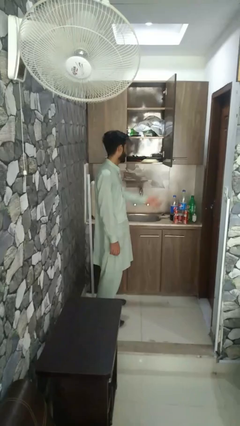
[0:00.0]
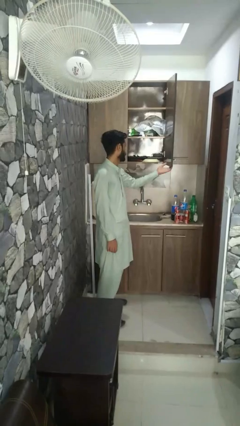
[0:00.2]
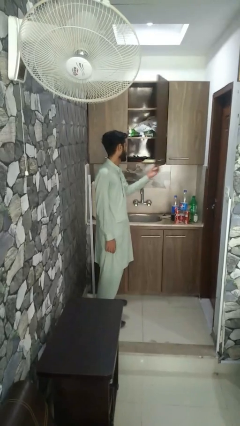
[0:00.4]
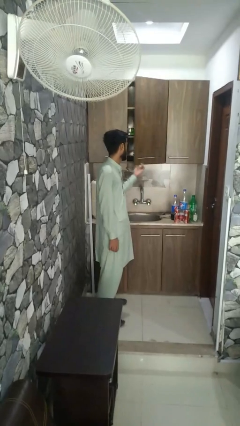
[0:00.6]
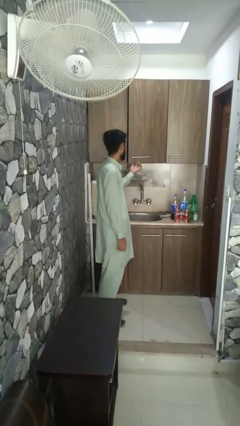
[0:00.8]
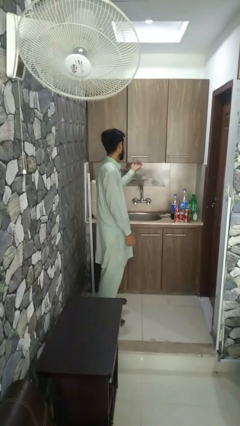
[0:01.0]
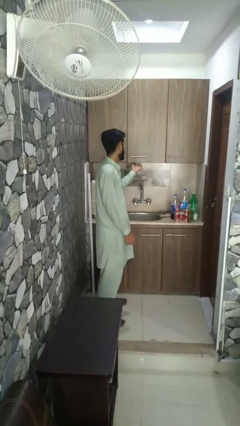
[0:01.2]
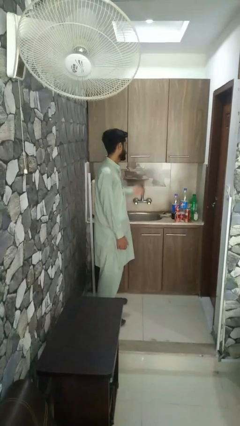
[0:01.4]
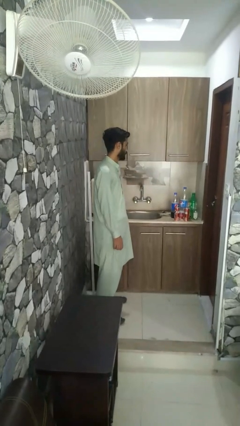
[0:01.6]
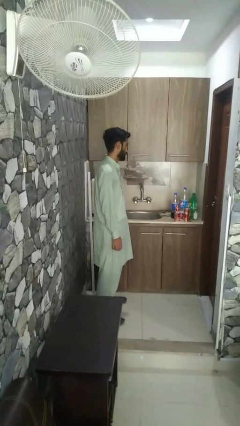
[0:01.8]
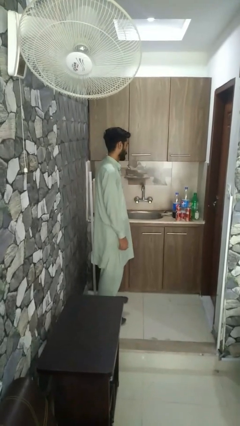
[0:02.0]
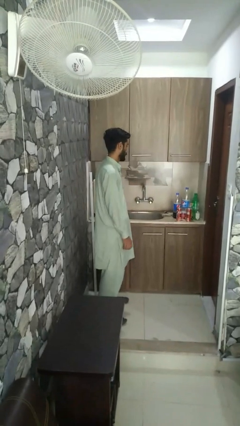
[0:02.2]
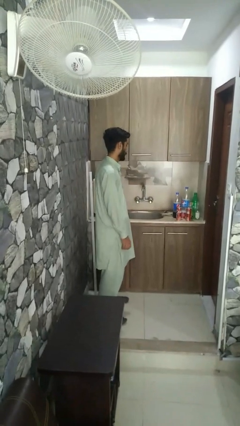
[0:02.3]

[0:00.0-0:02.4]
person closes closet door

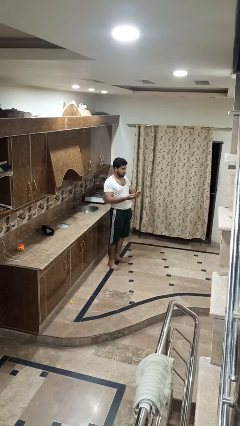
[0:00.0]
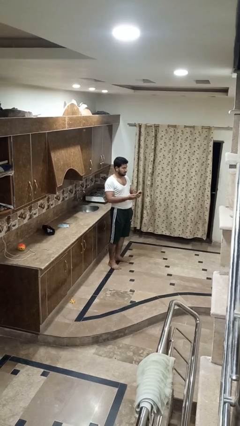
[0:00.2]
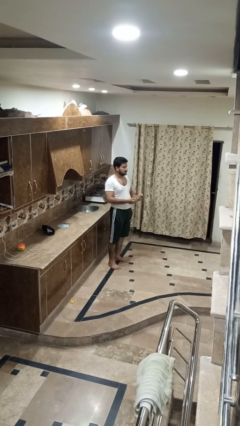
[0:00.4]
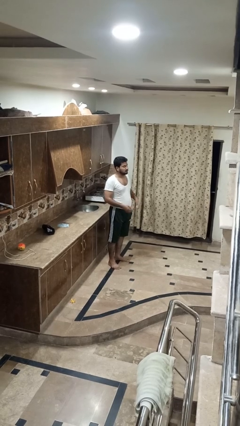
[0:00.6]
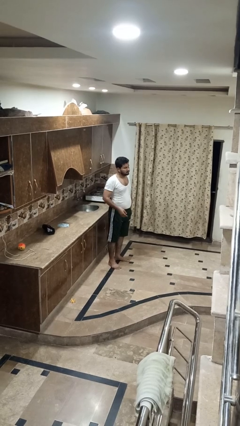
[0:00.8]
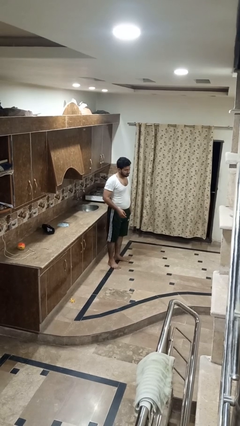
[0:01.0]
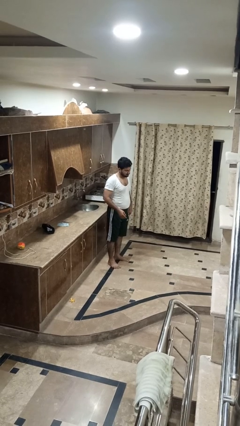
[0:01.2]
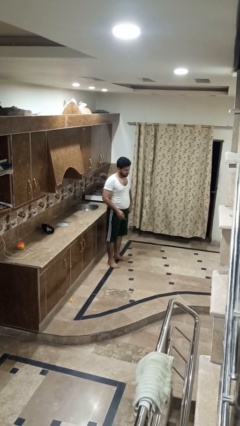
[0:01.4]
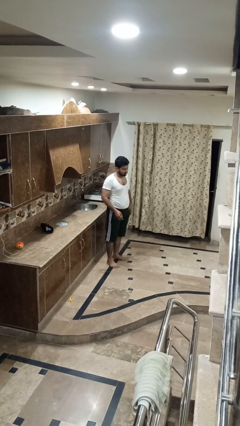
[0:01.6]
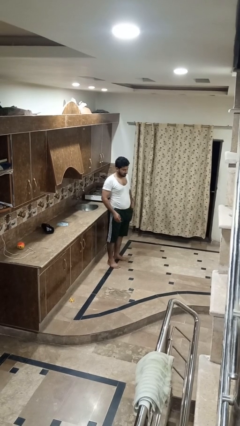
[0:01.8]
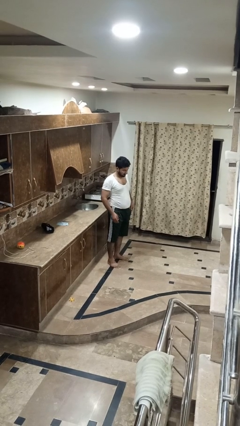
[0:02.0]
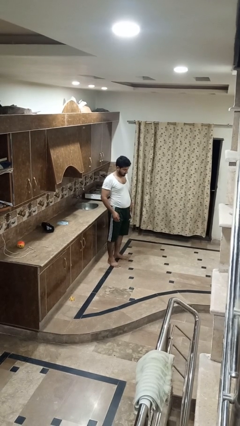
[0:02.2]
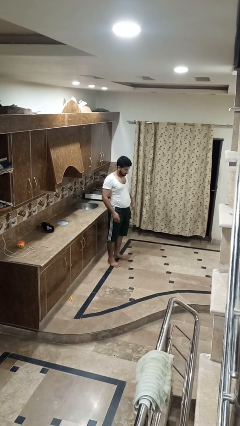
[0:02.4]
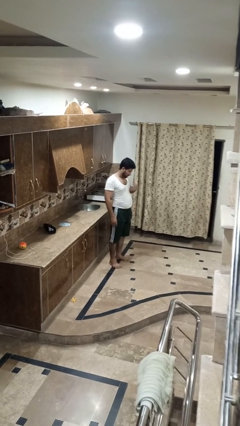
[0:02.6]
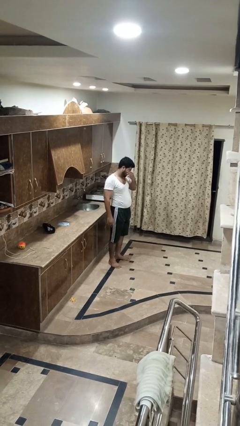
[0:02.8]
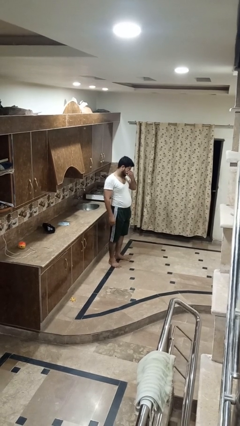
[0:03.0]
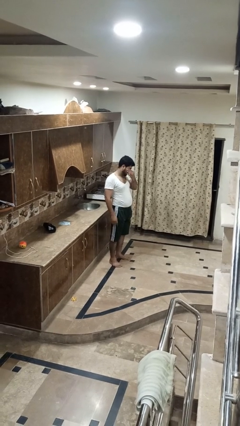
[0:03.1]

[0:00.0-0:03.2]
person puts phone into pocket

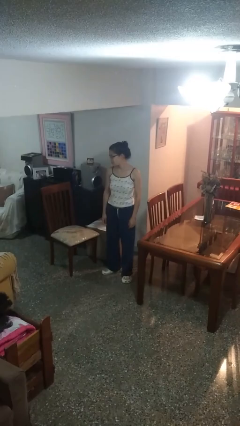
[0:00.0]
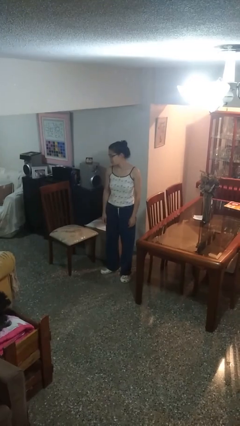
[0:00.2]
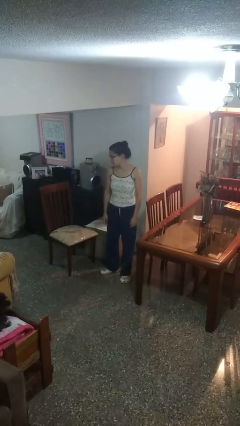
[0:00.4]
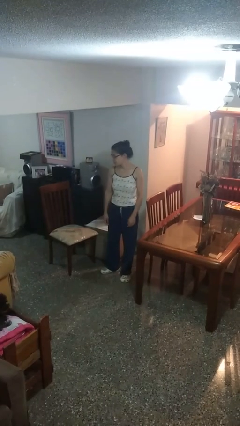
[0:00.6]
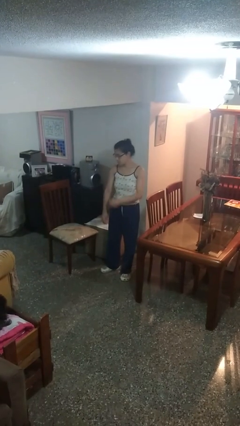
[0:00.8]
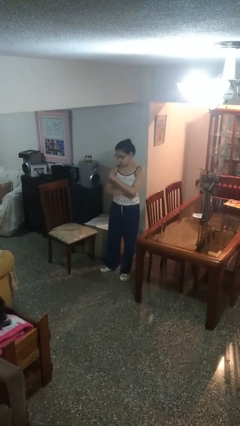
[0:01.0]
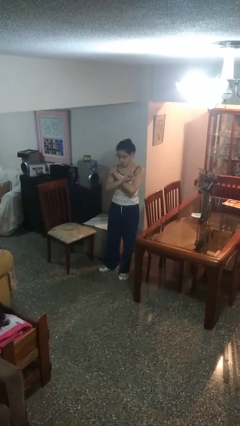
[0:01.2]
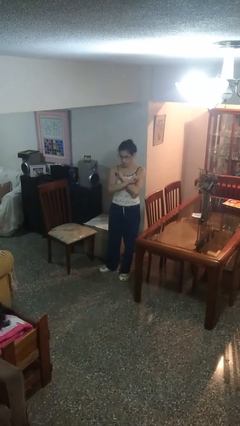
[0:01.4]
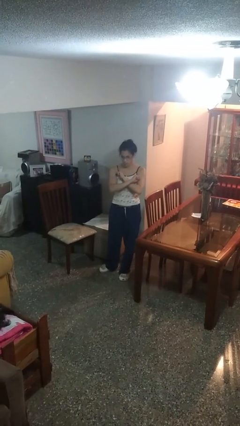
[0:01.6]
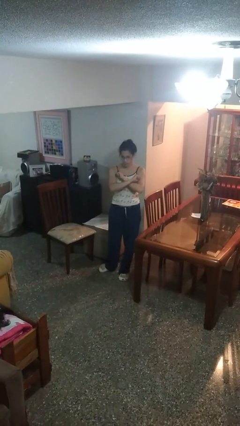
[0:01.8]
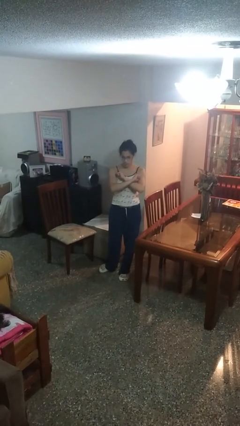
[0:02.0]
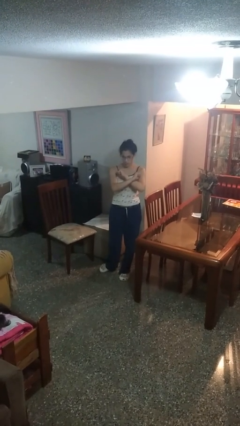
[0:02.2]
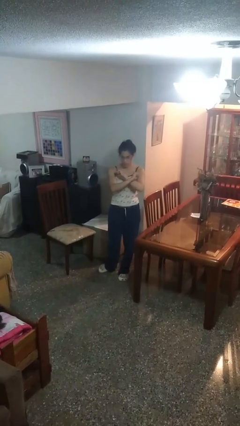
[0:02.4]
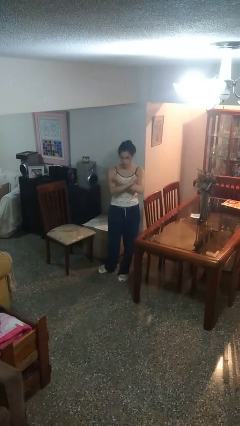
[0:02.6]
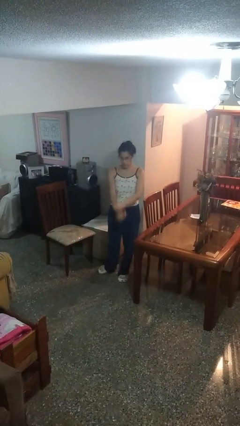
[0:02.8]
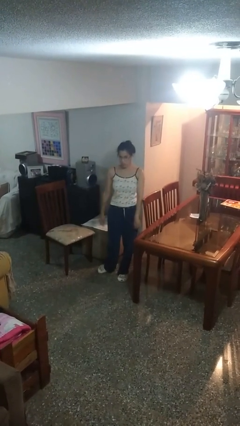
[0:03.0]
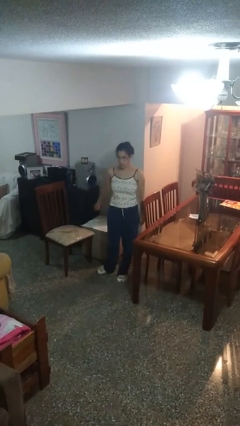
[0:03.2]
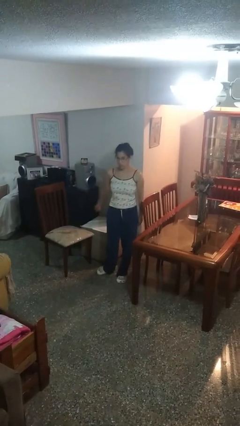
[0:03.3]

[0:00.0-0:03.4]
person gestures arms x

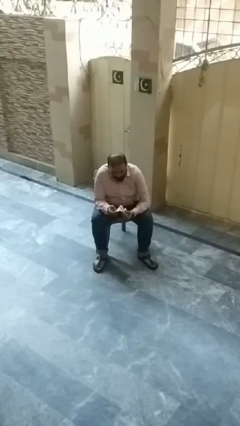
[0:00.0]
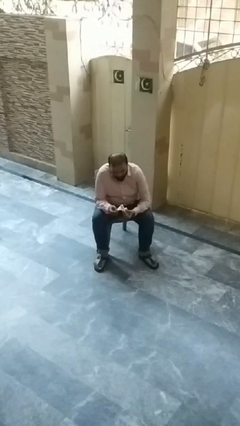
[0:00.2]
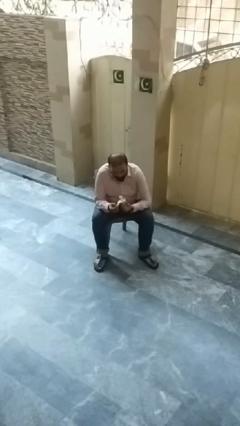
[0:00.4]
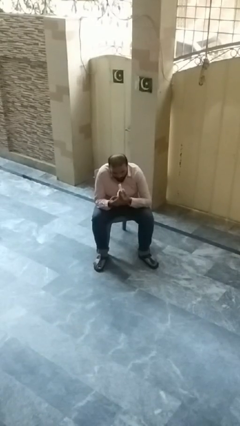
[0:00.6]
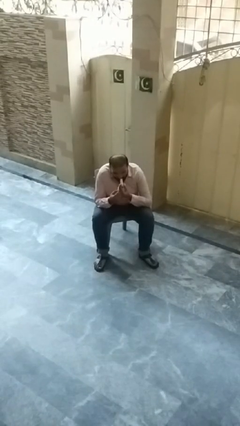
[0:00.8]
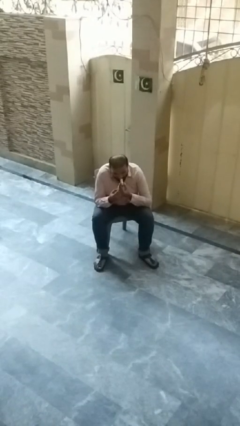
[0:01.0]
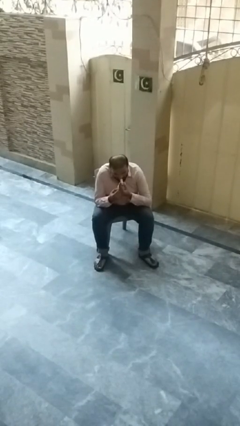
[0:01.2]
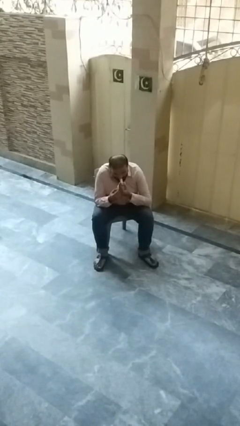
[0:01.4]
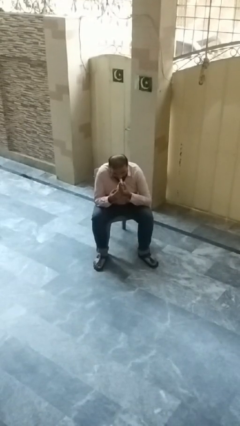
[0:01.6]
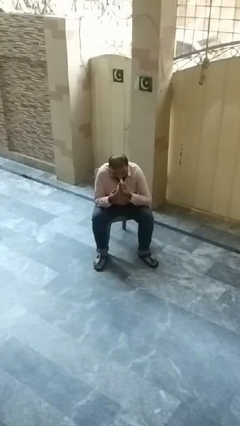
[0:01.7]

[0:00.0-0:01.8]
person eats banana

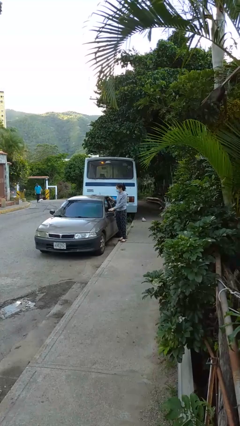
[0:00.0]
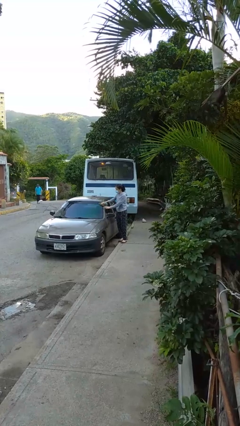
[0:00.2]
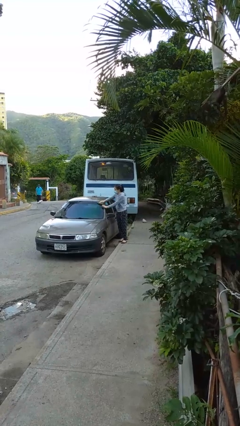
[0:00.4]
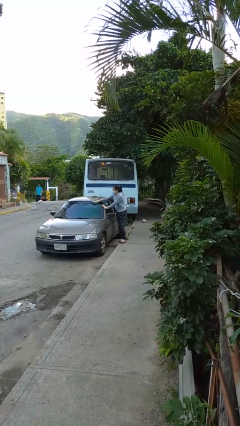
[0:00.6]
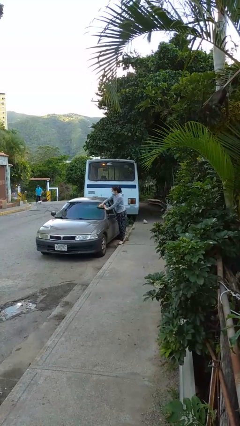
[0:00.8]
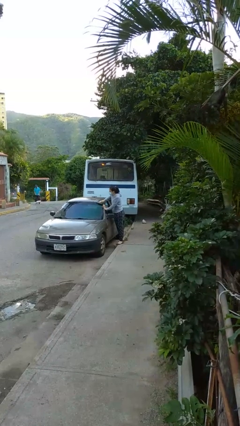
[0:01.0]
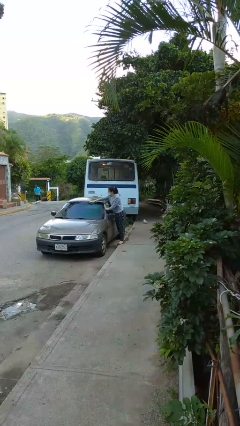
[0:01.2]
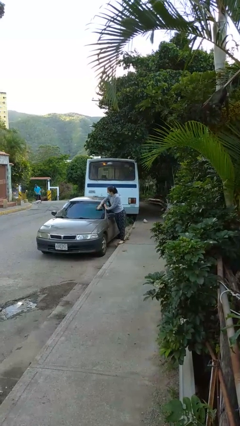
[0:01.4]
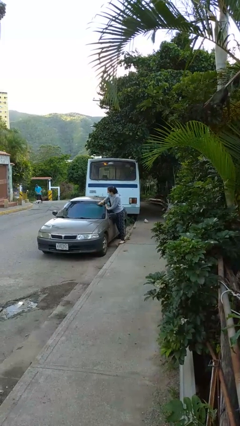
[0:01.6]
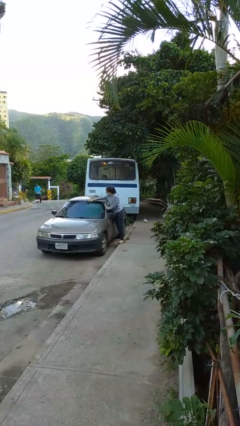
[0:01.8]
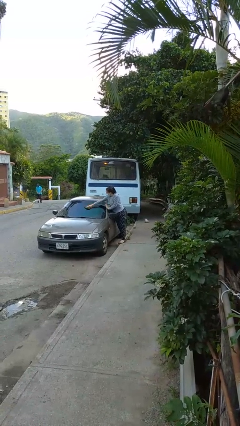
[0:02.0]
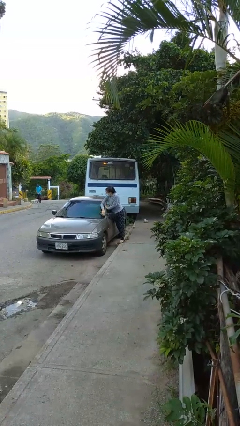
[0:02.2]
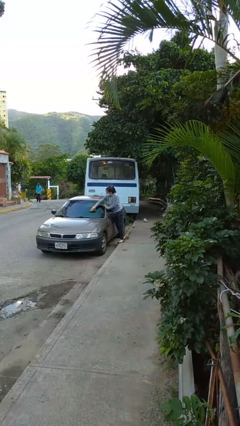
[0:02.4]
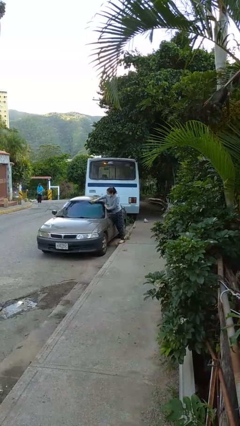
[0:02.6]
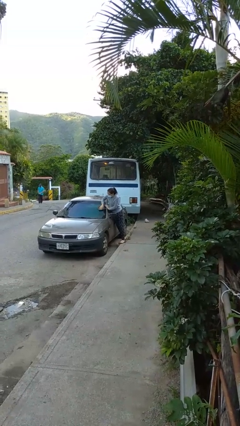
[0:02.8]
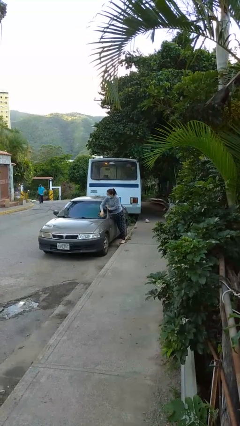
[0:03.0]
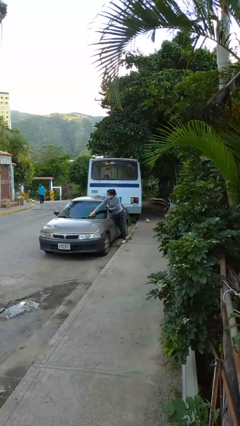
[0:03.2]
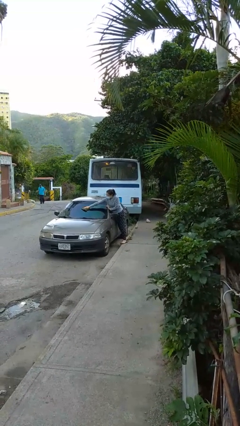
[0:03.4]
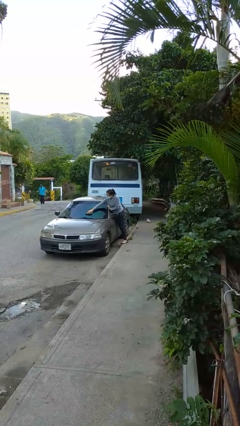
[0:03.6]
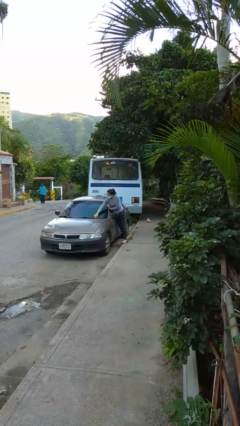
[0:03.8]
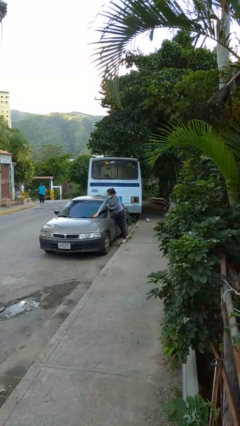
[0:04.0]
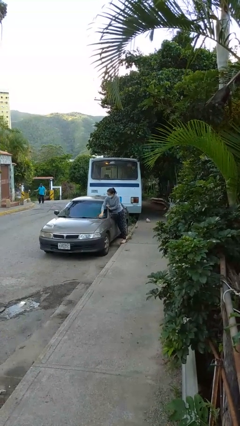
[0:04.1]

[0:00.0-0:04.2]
person polishes car with rag

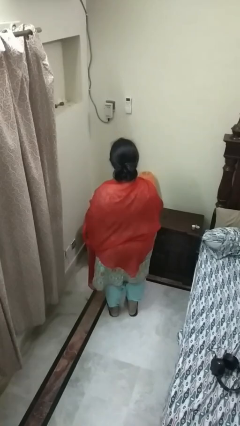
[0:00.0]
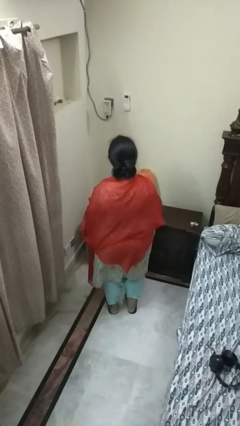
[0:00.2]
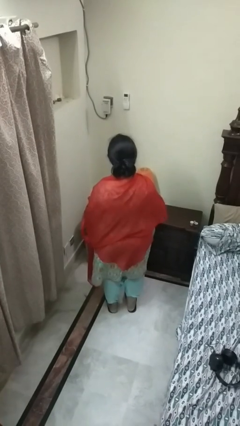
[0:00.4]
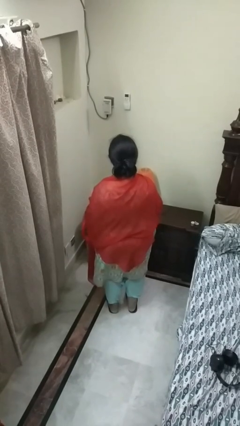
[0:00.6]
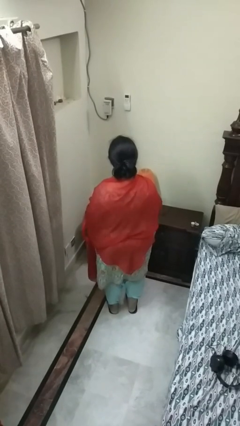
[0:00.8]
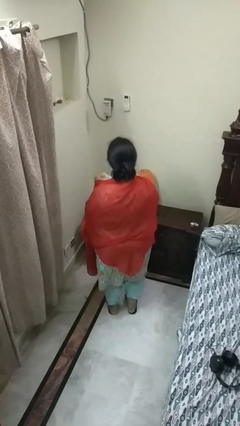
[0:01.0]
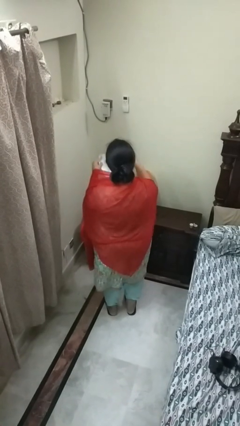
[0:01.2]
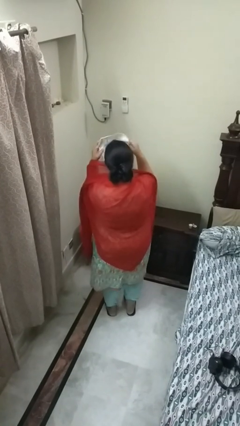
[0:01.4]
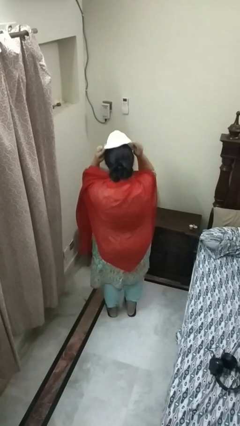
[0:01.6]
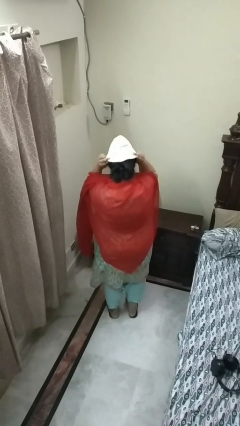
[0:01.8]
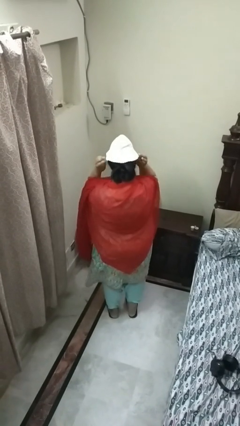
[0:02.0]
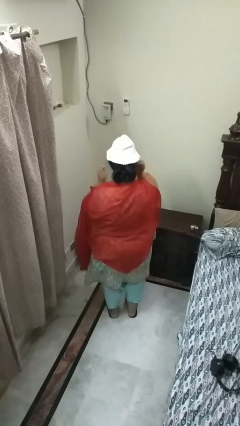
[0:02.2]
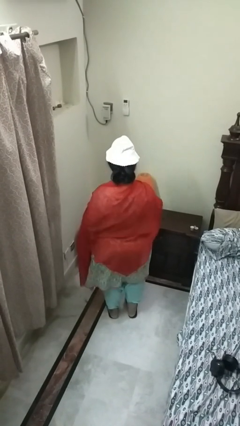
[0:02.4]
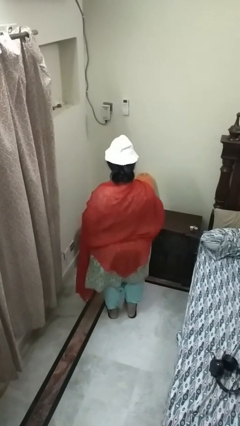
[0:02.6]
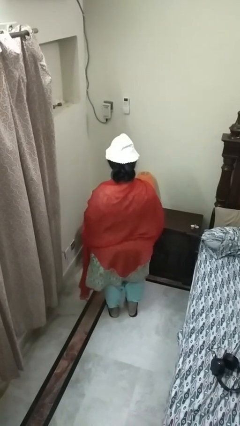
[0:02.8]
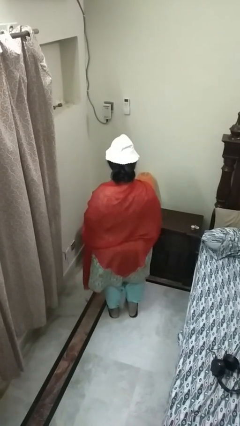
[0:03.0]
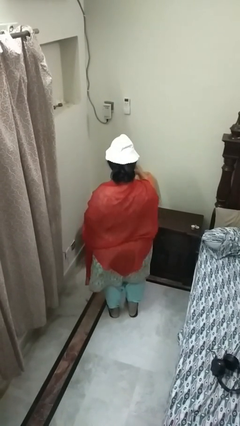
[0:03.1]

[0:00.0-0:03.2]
person puts on hat
